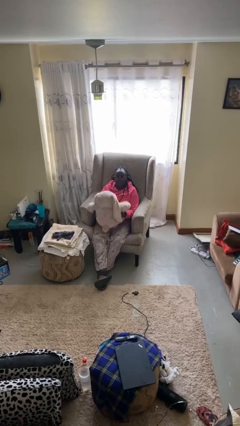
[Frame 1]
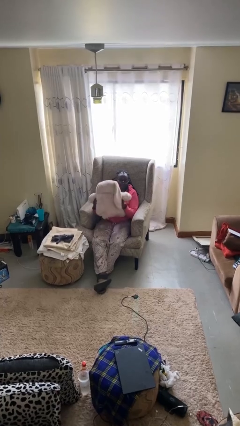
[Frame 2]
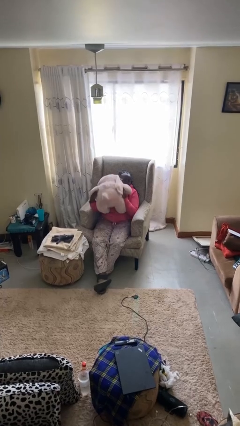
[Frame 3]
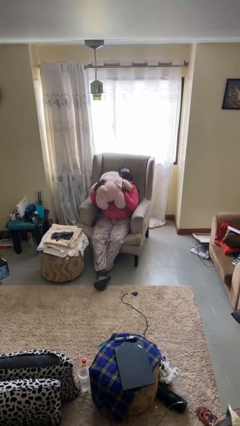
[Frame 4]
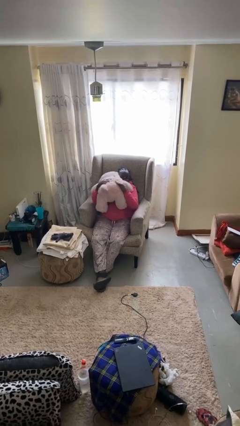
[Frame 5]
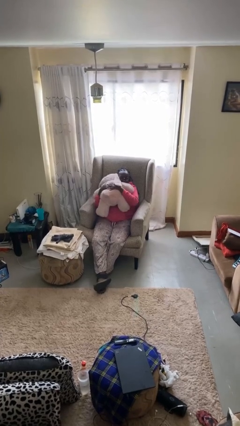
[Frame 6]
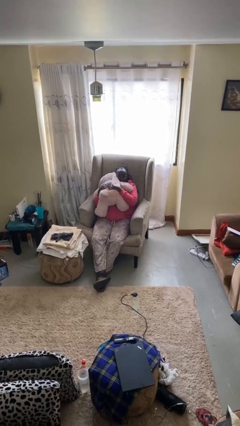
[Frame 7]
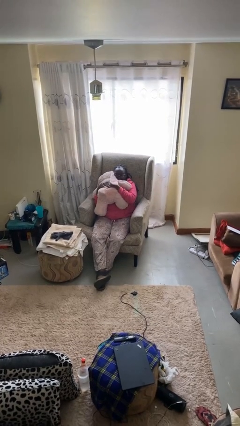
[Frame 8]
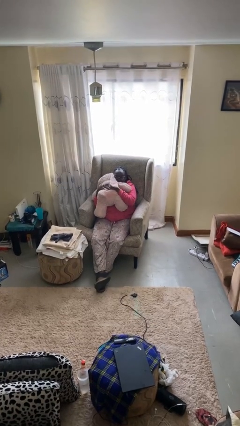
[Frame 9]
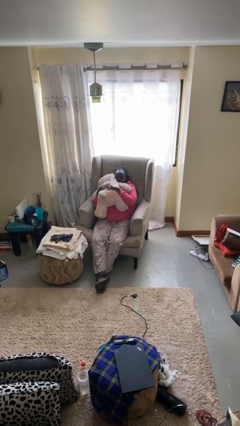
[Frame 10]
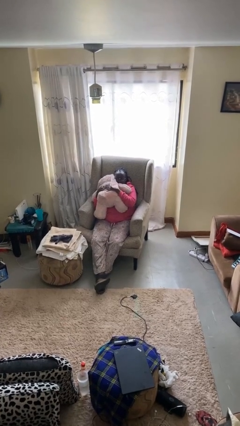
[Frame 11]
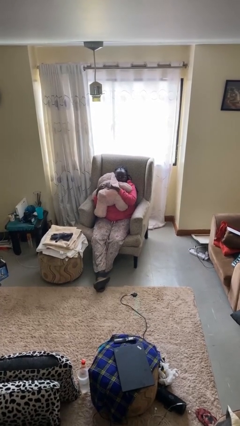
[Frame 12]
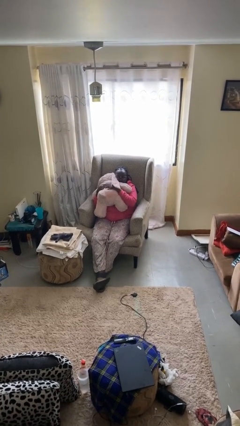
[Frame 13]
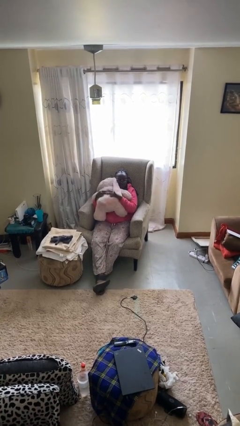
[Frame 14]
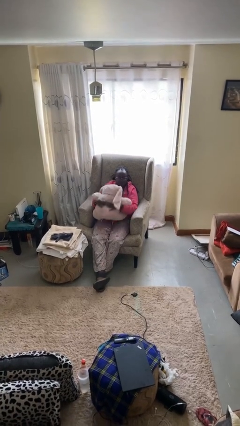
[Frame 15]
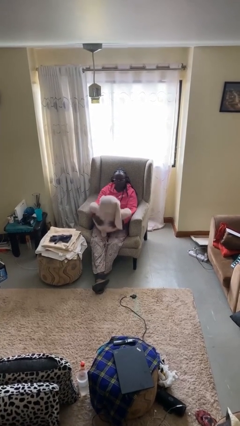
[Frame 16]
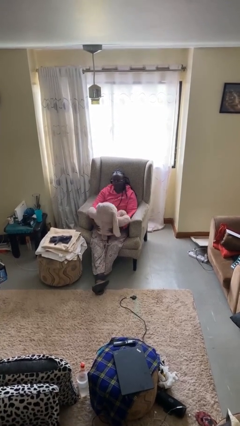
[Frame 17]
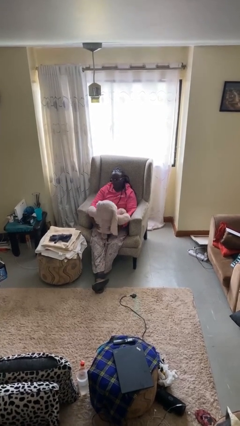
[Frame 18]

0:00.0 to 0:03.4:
person hugs stuffed animal

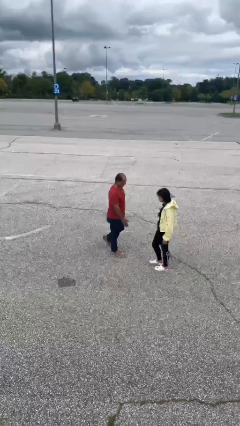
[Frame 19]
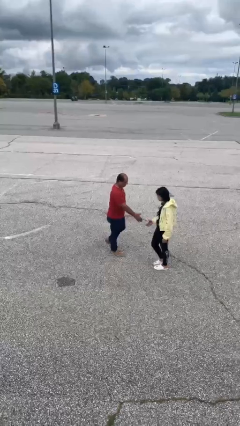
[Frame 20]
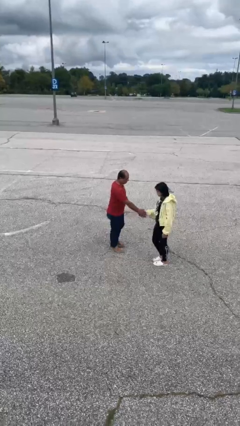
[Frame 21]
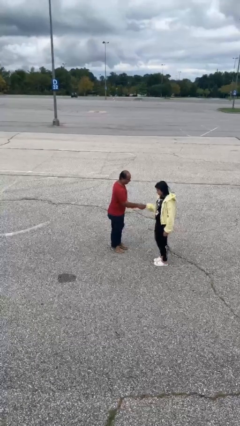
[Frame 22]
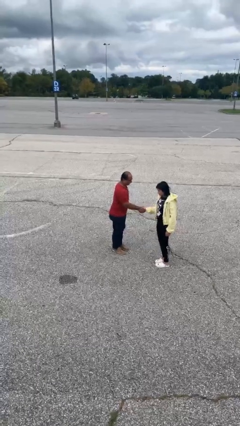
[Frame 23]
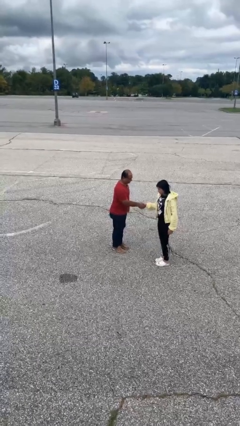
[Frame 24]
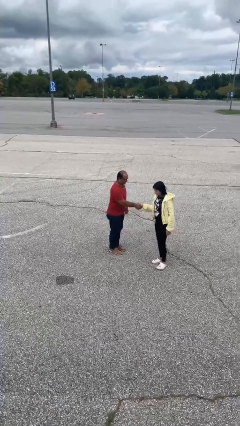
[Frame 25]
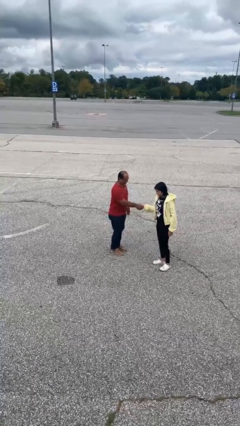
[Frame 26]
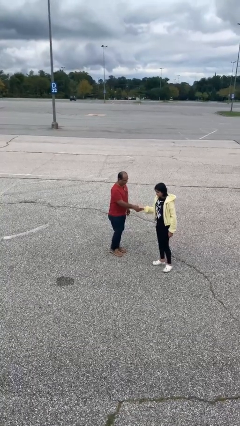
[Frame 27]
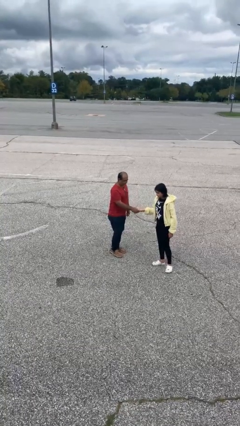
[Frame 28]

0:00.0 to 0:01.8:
person shakes hand

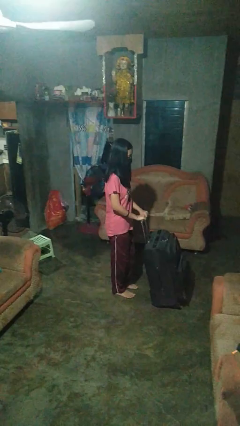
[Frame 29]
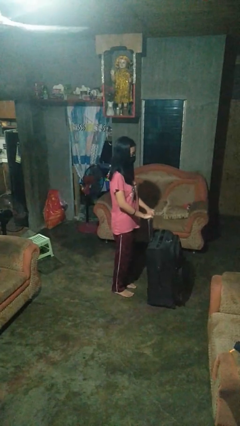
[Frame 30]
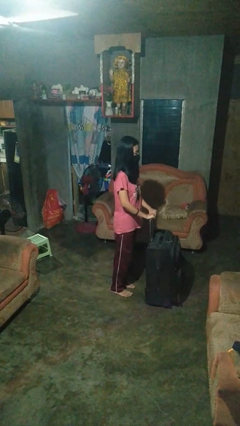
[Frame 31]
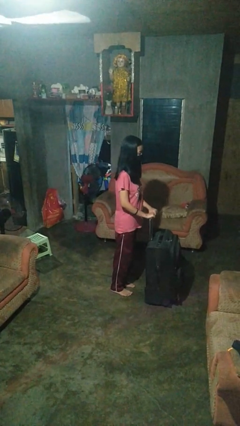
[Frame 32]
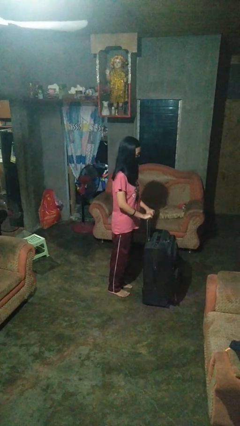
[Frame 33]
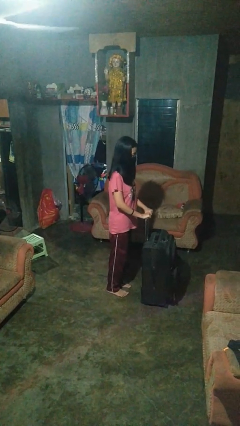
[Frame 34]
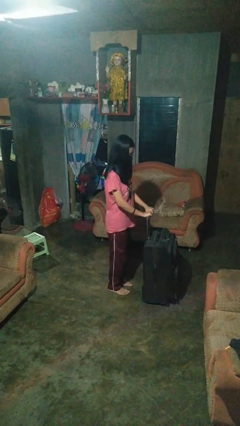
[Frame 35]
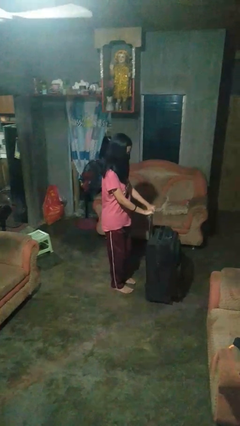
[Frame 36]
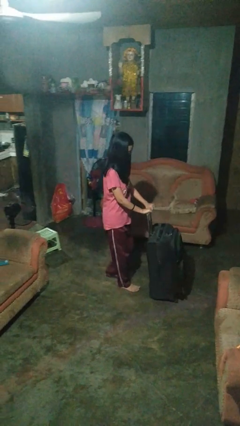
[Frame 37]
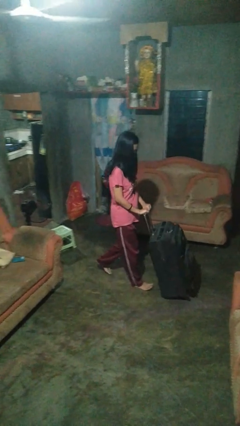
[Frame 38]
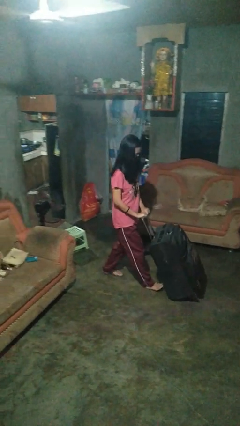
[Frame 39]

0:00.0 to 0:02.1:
person pulls wheeled cart

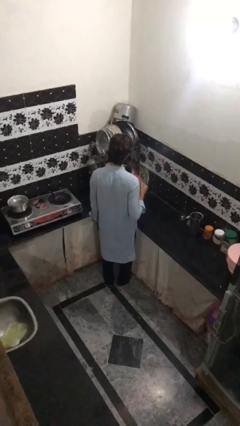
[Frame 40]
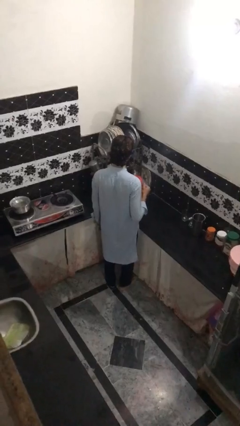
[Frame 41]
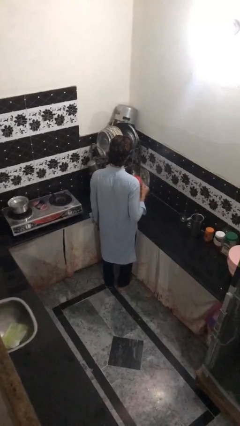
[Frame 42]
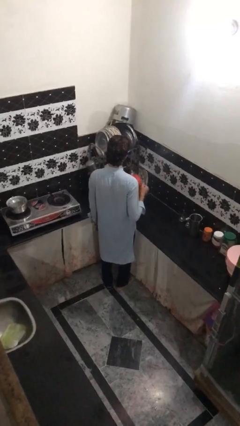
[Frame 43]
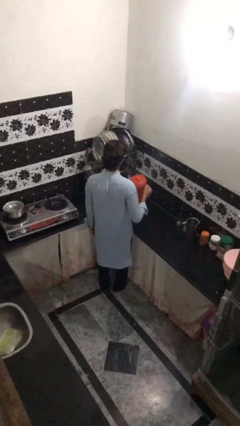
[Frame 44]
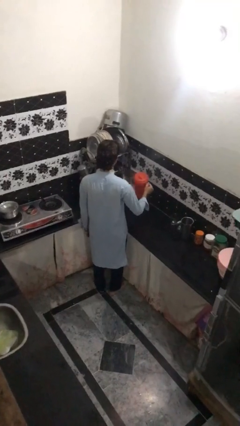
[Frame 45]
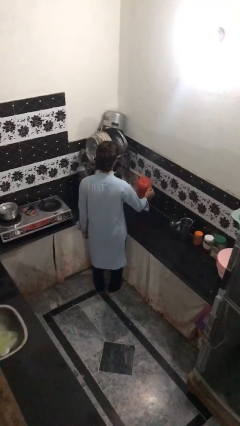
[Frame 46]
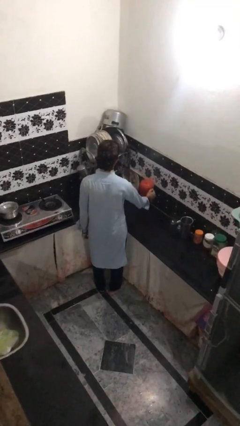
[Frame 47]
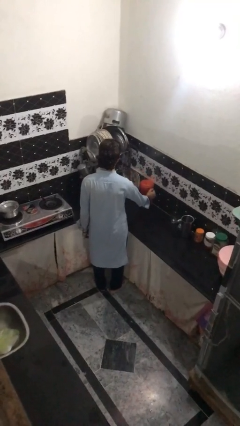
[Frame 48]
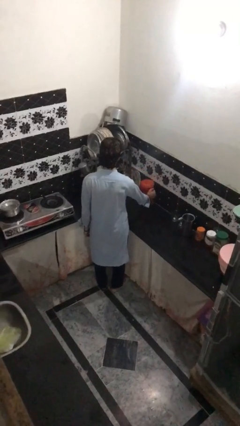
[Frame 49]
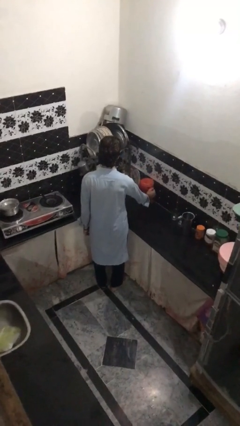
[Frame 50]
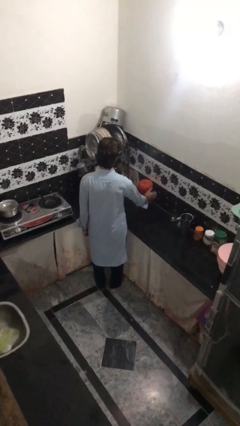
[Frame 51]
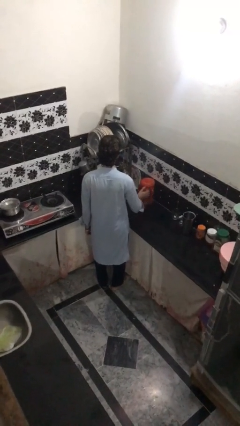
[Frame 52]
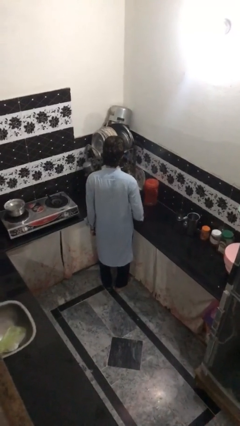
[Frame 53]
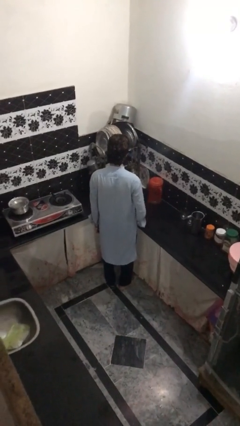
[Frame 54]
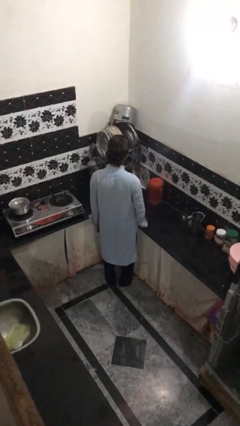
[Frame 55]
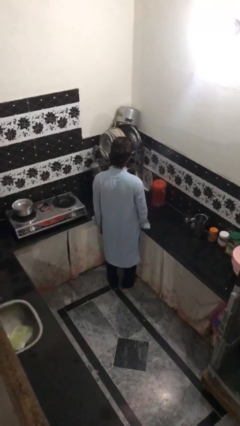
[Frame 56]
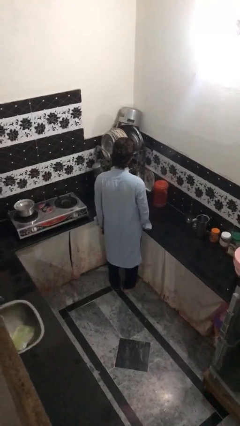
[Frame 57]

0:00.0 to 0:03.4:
person puts down object on countertop

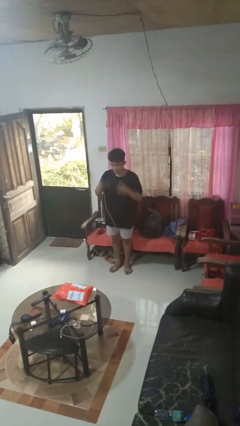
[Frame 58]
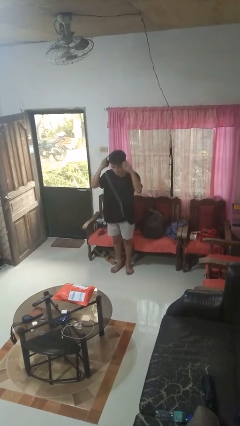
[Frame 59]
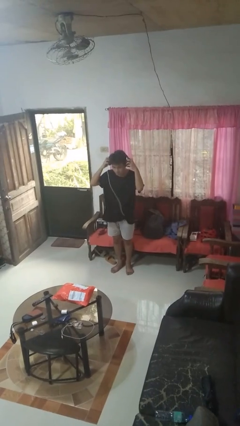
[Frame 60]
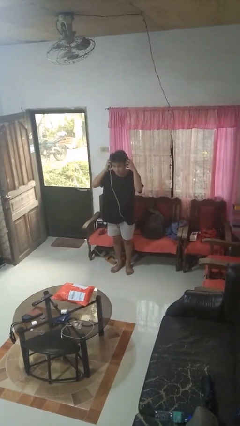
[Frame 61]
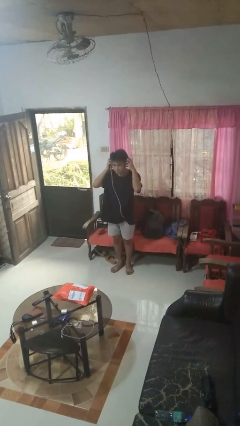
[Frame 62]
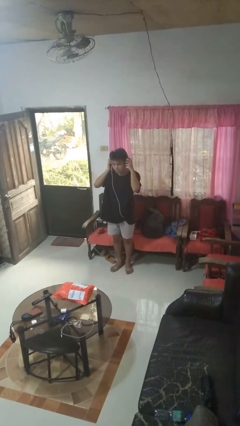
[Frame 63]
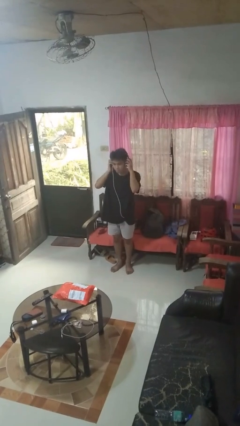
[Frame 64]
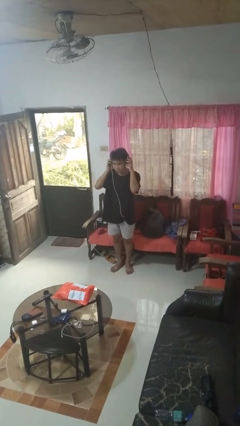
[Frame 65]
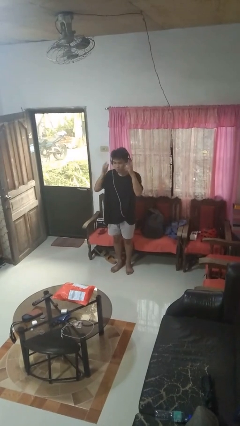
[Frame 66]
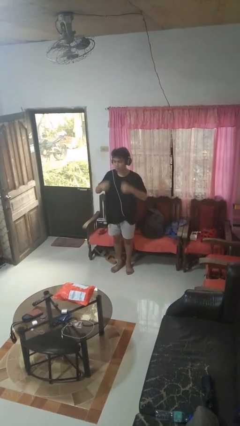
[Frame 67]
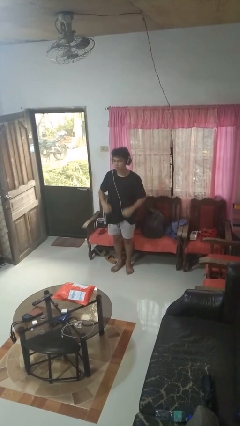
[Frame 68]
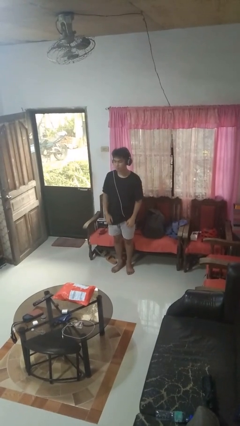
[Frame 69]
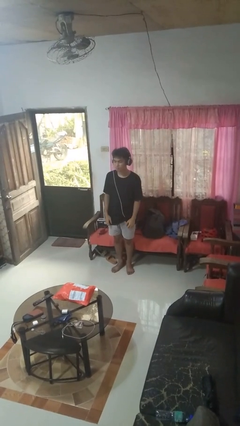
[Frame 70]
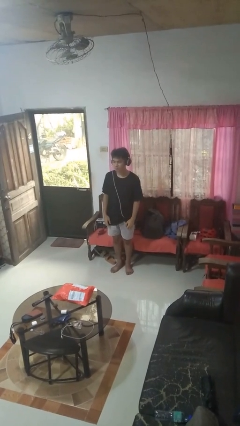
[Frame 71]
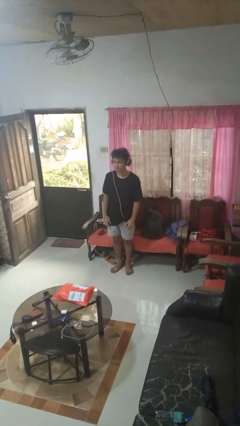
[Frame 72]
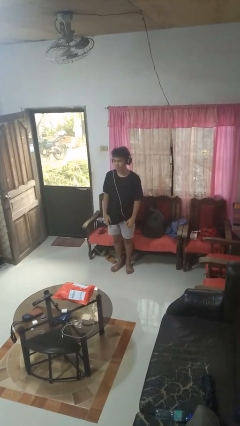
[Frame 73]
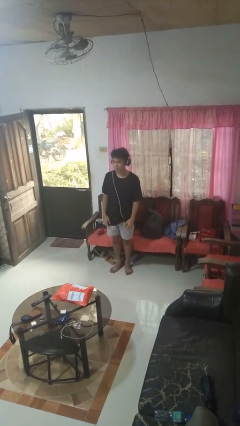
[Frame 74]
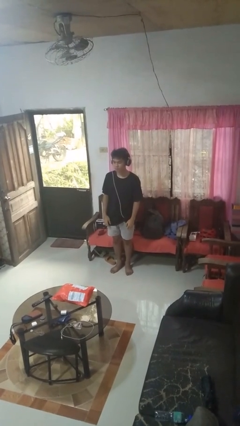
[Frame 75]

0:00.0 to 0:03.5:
person puts on headphones

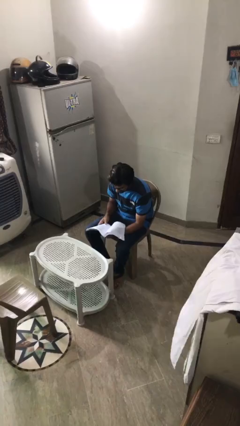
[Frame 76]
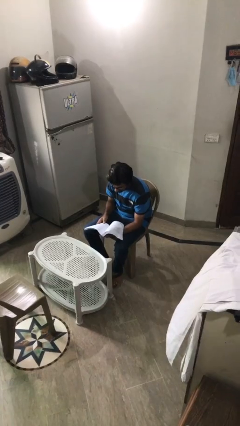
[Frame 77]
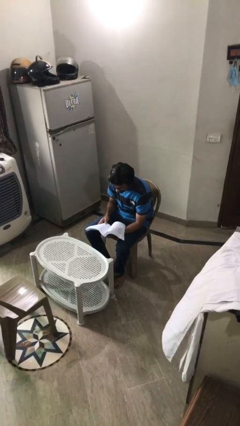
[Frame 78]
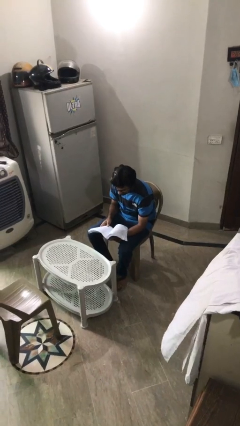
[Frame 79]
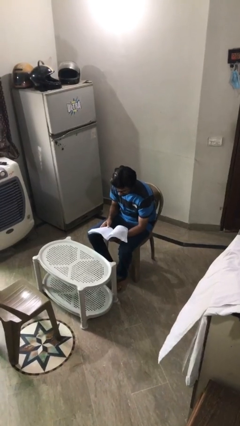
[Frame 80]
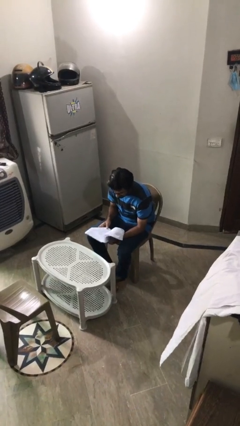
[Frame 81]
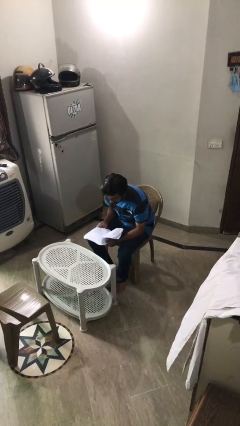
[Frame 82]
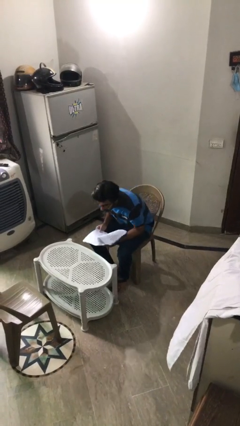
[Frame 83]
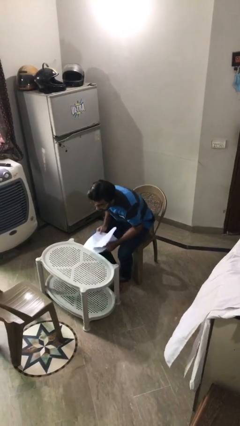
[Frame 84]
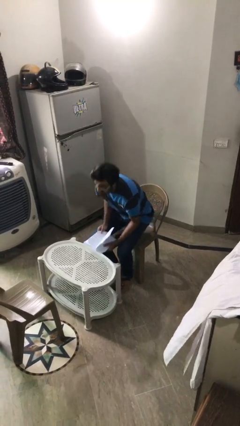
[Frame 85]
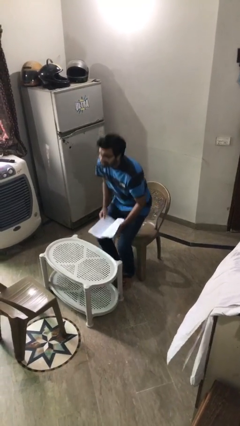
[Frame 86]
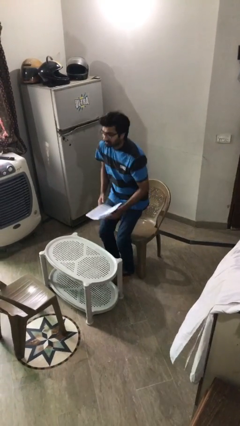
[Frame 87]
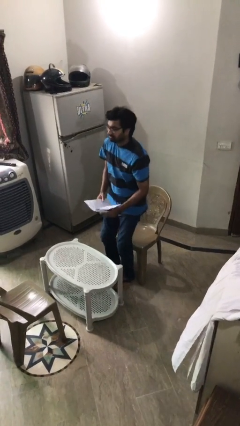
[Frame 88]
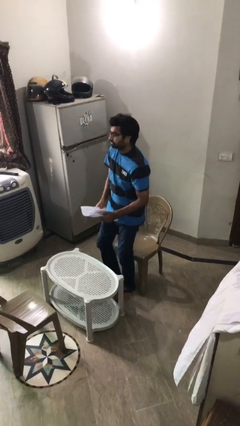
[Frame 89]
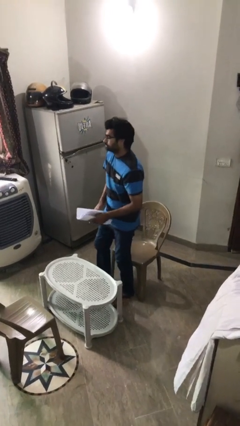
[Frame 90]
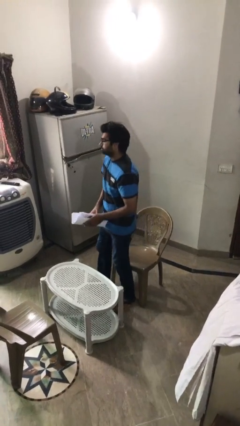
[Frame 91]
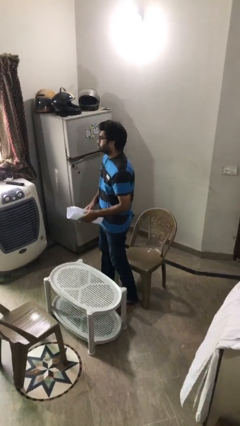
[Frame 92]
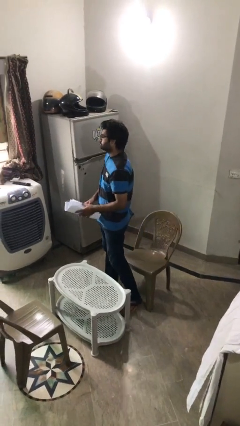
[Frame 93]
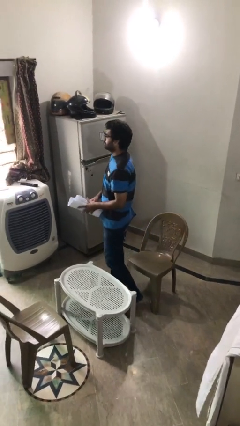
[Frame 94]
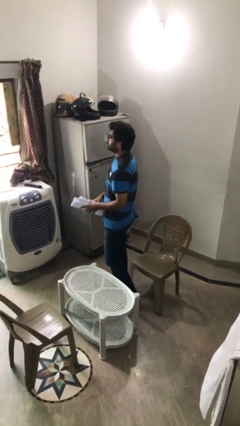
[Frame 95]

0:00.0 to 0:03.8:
person stands up

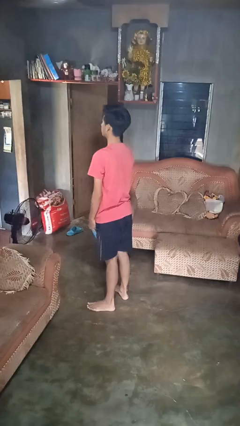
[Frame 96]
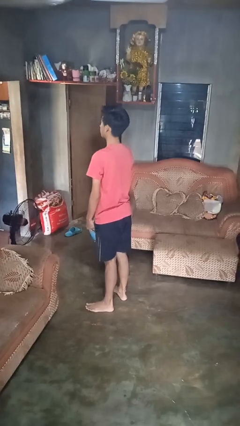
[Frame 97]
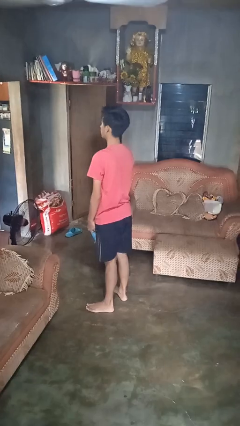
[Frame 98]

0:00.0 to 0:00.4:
person catches dropped object
